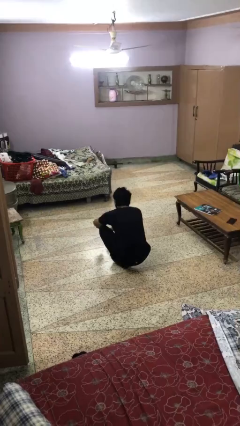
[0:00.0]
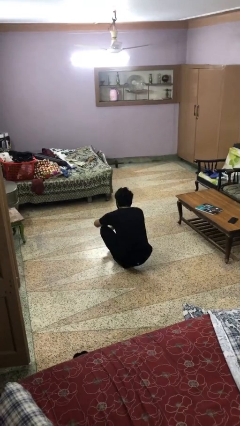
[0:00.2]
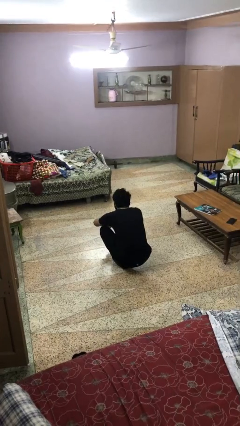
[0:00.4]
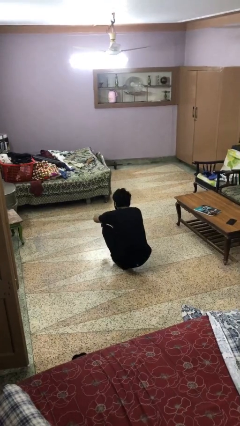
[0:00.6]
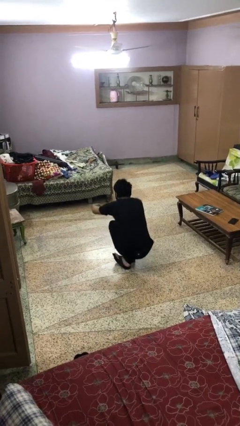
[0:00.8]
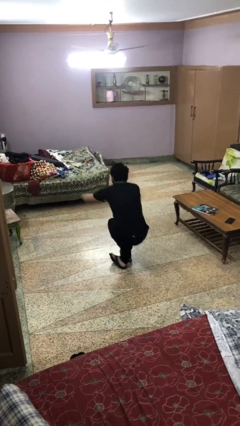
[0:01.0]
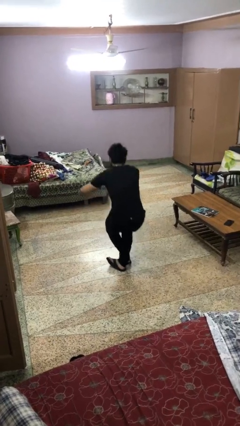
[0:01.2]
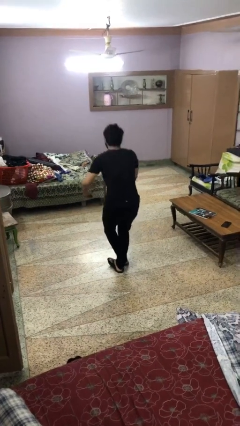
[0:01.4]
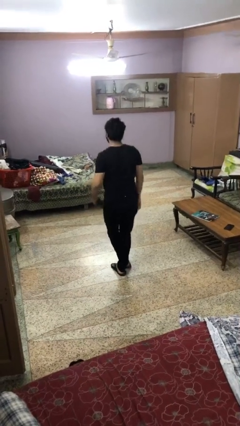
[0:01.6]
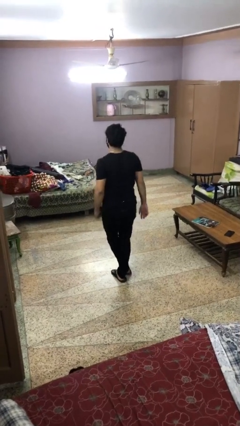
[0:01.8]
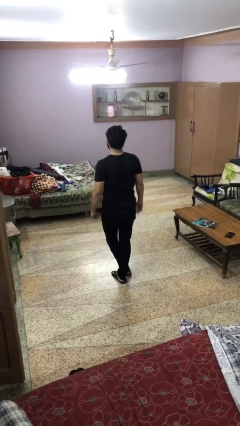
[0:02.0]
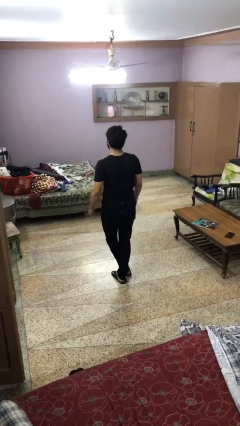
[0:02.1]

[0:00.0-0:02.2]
person stands up from floor

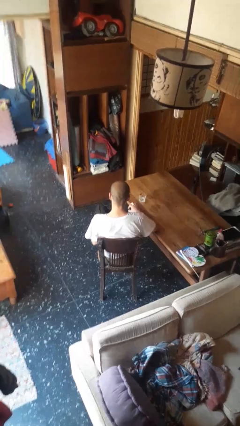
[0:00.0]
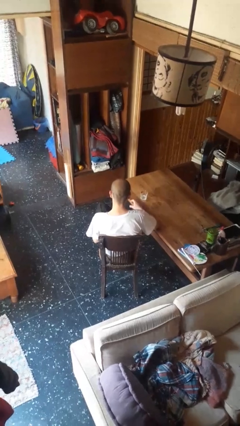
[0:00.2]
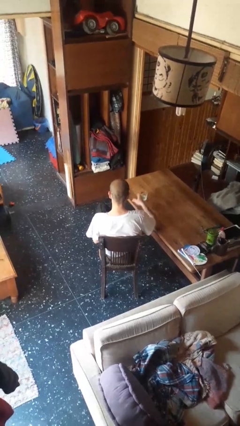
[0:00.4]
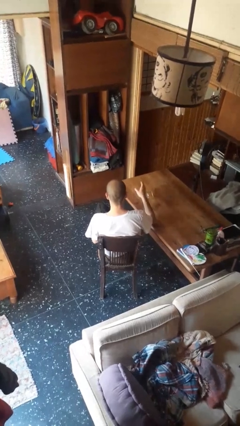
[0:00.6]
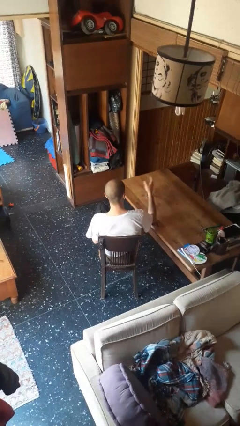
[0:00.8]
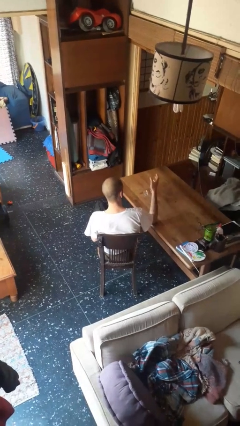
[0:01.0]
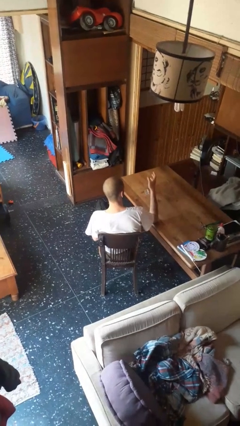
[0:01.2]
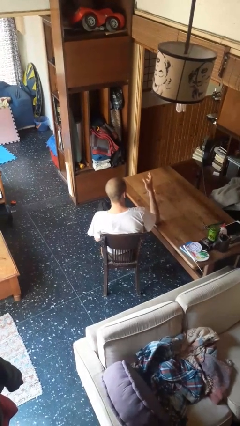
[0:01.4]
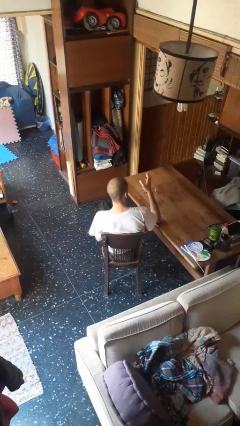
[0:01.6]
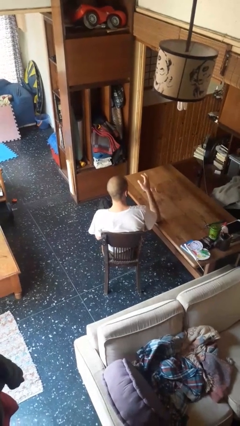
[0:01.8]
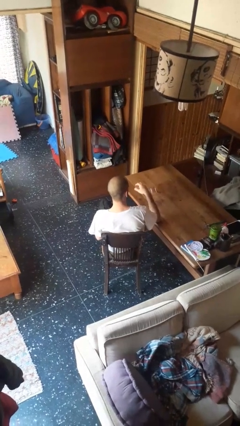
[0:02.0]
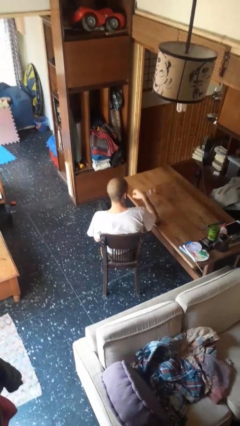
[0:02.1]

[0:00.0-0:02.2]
person knocks over glass

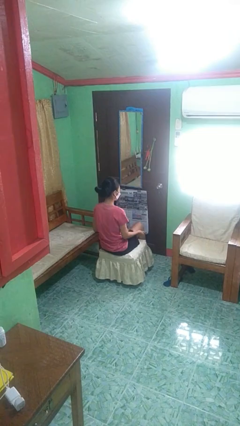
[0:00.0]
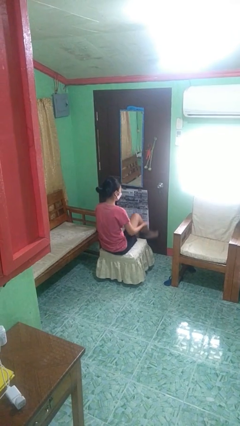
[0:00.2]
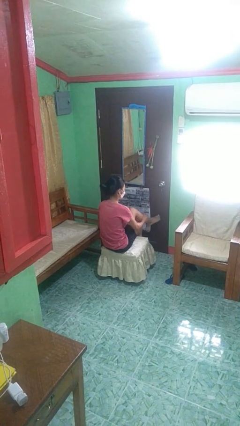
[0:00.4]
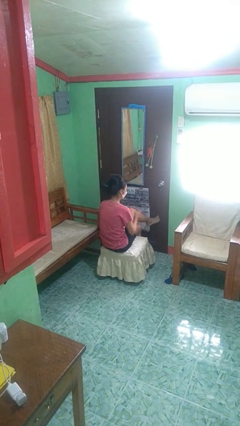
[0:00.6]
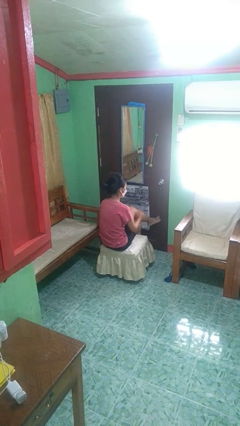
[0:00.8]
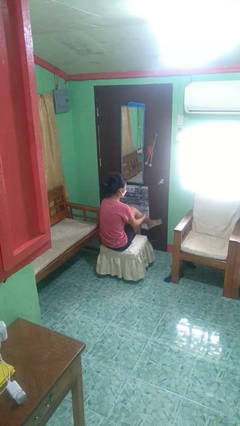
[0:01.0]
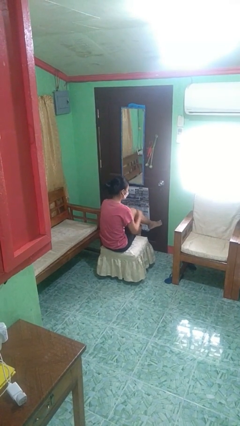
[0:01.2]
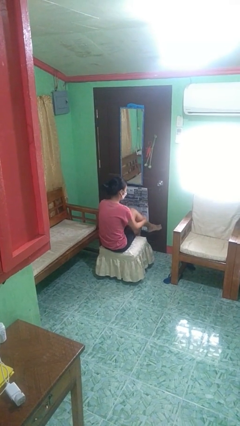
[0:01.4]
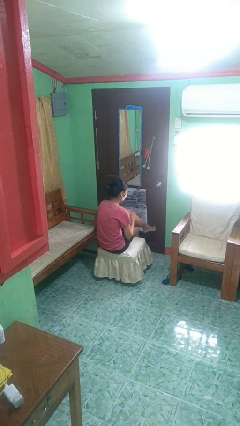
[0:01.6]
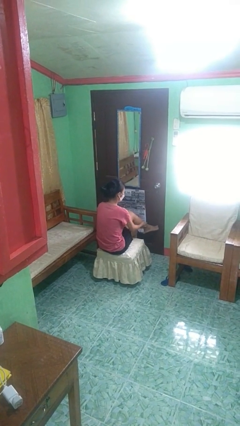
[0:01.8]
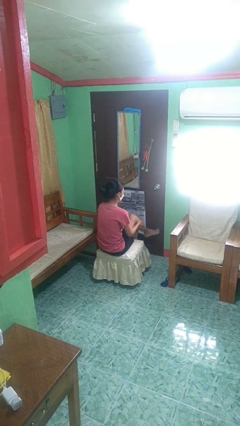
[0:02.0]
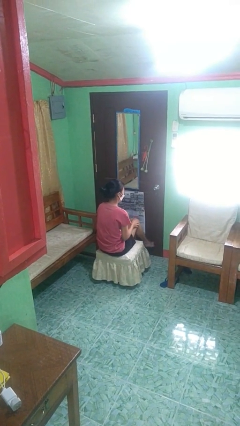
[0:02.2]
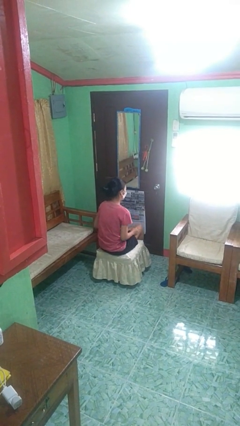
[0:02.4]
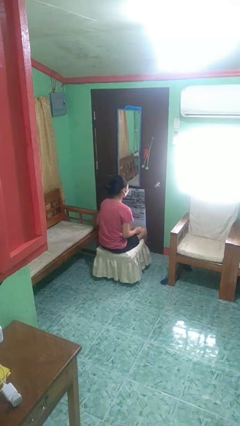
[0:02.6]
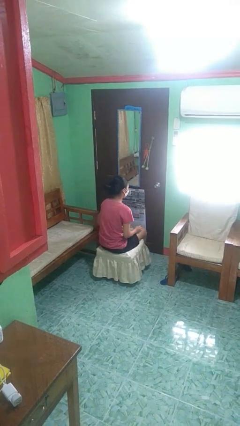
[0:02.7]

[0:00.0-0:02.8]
person applies sunscreen

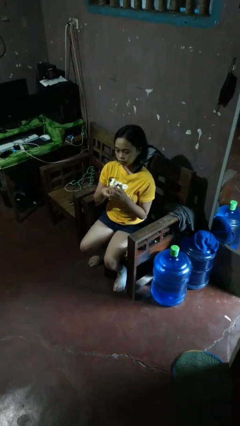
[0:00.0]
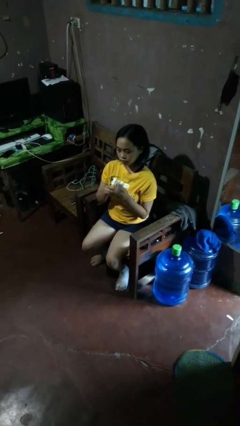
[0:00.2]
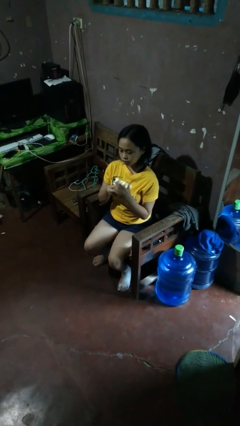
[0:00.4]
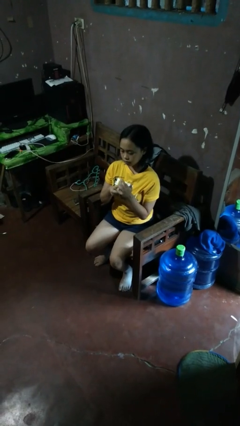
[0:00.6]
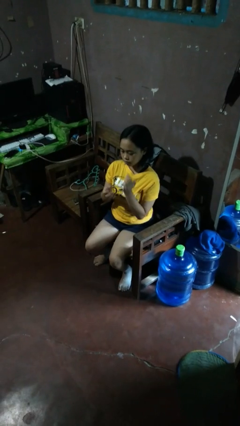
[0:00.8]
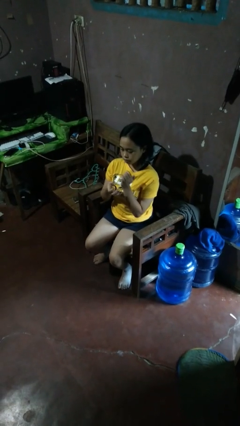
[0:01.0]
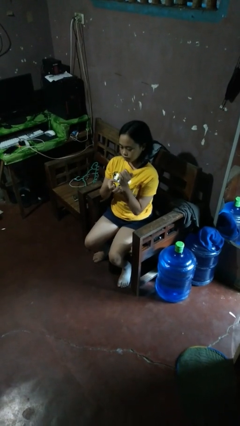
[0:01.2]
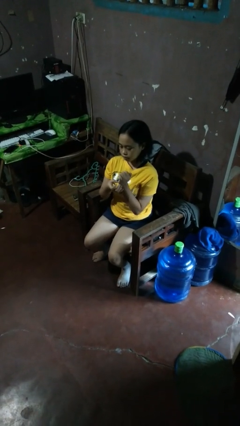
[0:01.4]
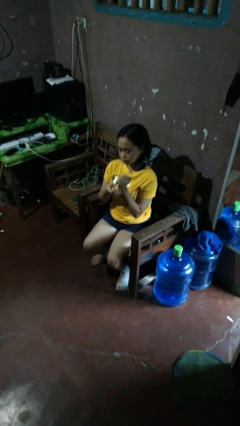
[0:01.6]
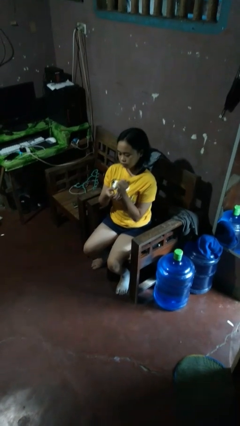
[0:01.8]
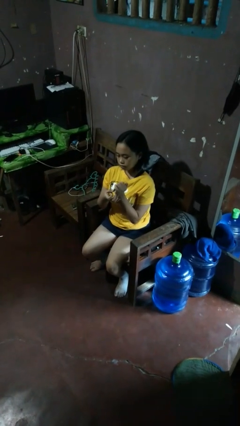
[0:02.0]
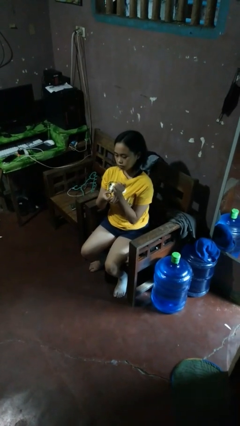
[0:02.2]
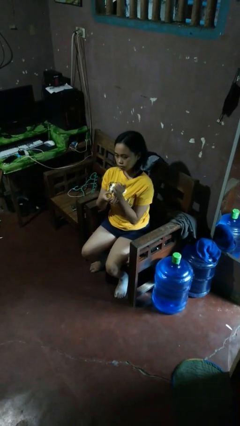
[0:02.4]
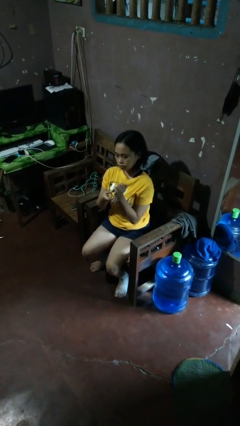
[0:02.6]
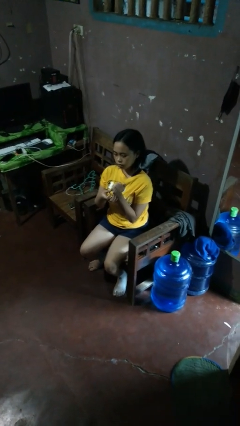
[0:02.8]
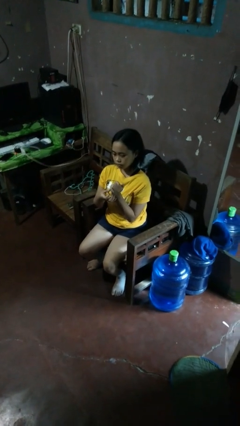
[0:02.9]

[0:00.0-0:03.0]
person clips fingernails

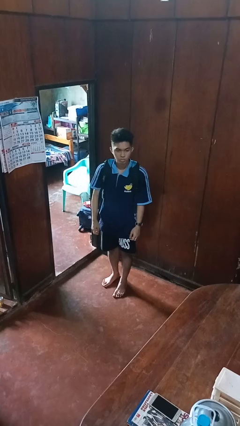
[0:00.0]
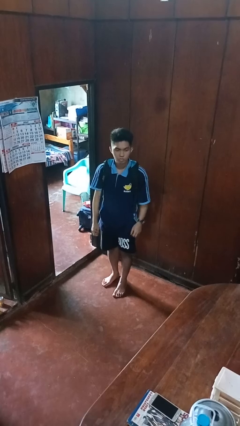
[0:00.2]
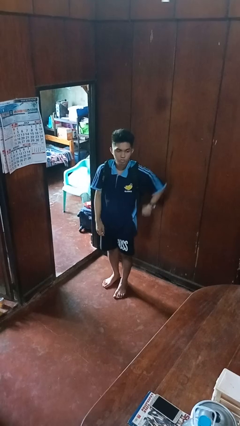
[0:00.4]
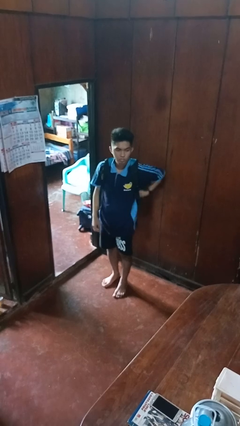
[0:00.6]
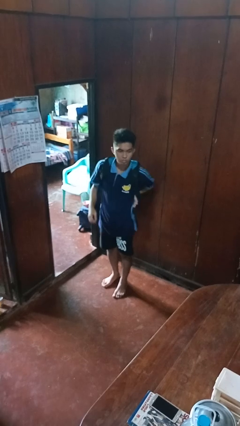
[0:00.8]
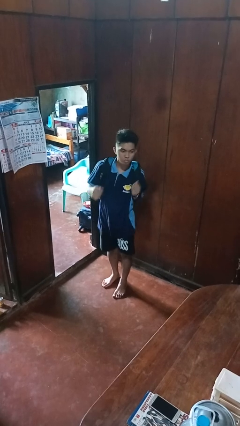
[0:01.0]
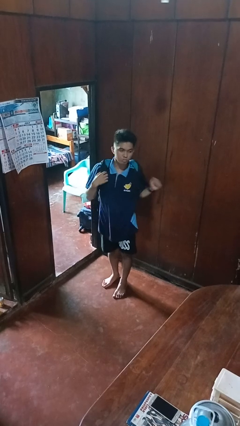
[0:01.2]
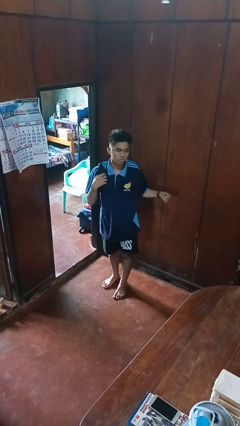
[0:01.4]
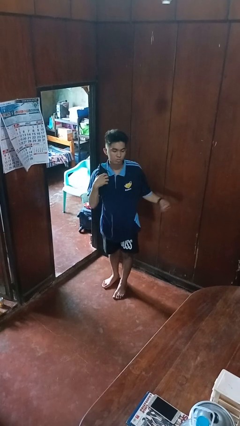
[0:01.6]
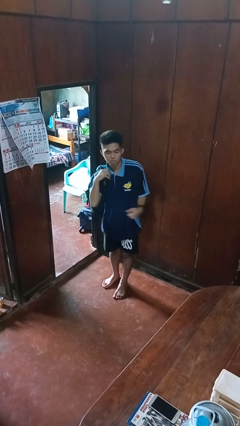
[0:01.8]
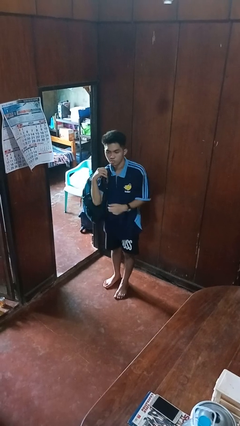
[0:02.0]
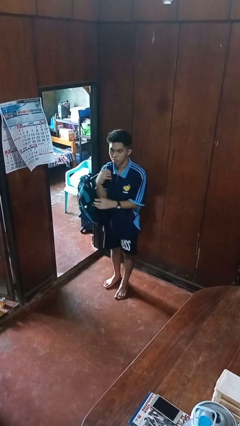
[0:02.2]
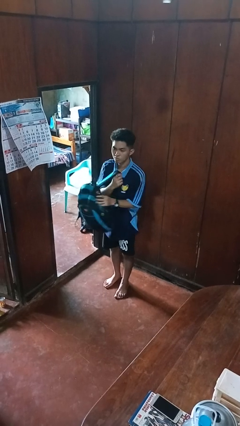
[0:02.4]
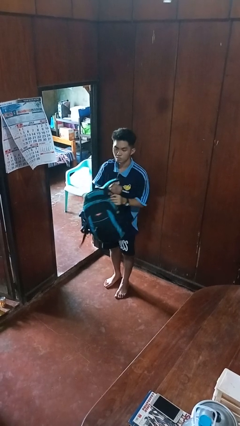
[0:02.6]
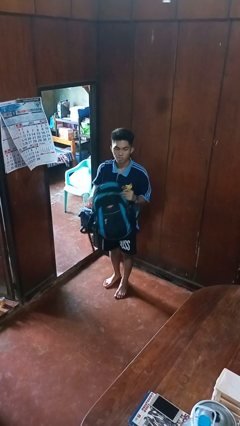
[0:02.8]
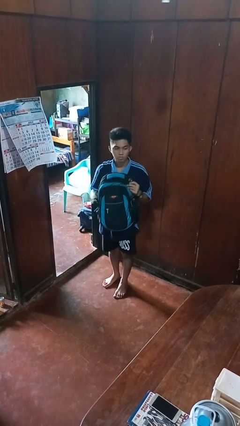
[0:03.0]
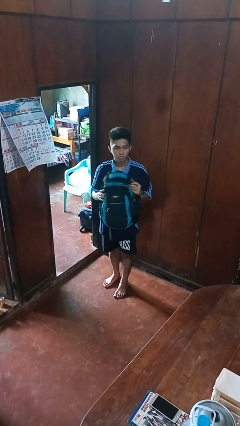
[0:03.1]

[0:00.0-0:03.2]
person takes off backpack

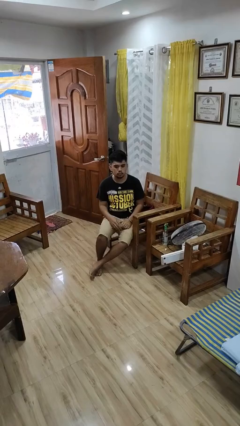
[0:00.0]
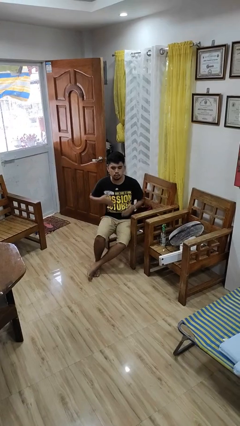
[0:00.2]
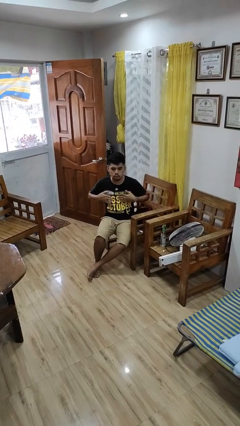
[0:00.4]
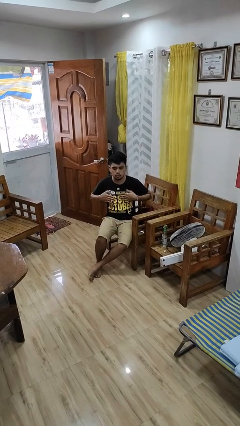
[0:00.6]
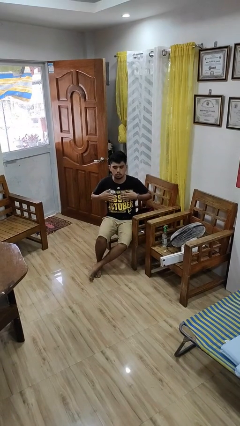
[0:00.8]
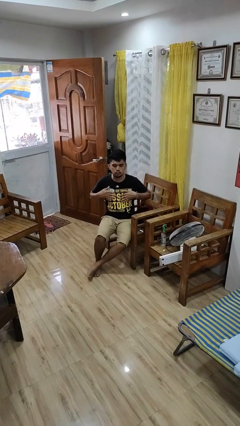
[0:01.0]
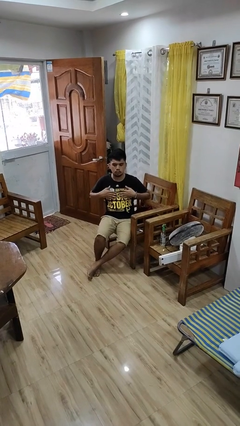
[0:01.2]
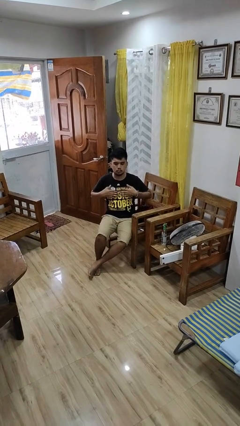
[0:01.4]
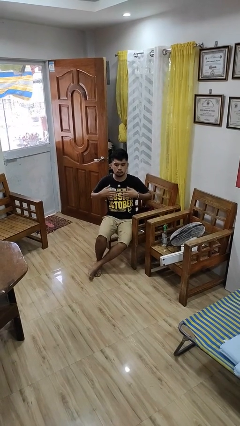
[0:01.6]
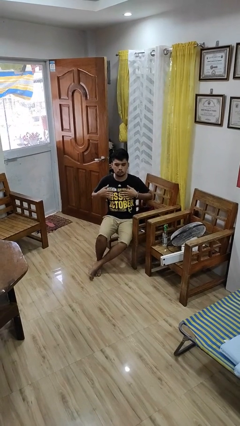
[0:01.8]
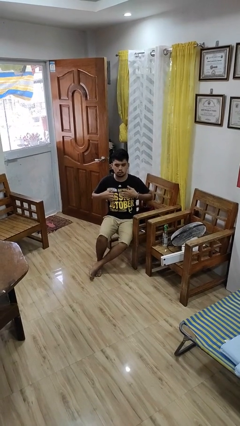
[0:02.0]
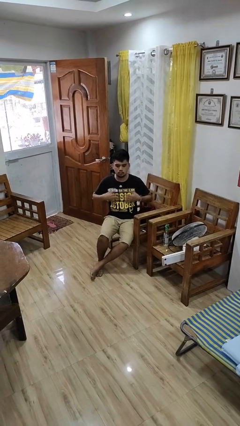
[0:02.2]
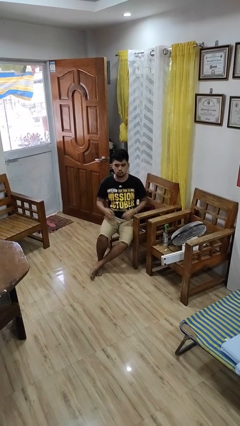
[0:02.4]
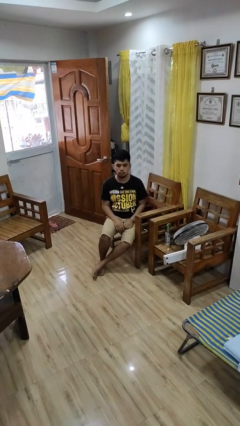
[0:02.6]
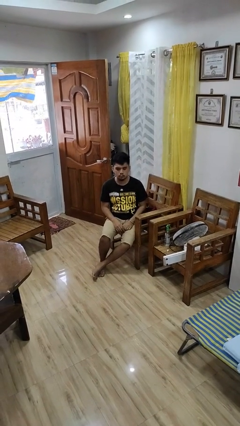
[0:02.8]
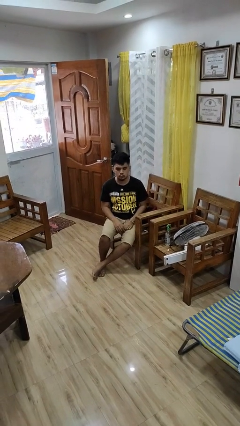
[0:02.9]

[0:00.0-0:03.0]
person drums on chest

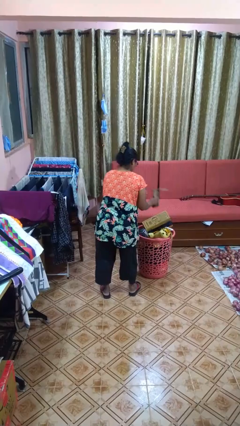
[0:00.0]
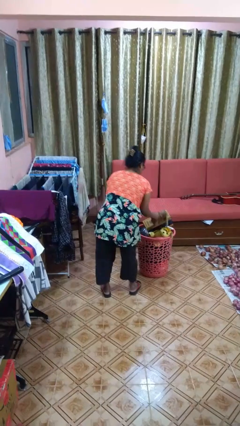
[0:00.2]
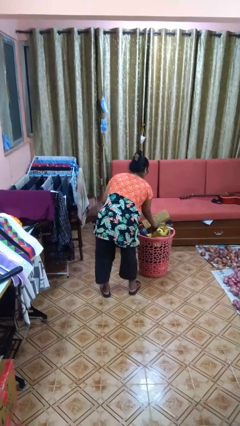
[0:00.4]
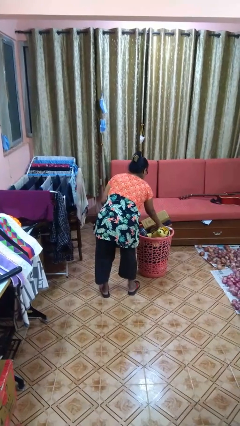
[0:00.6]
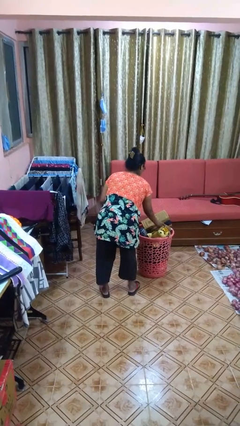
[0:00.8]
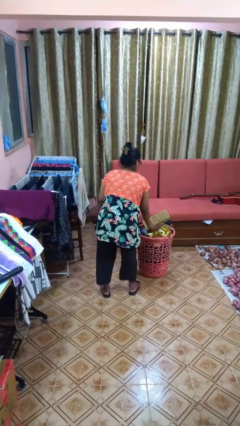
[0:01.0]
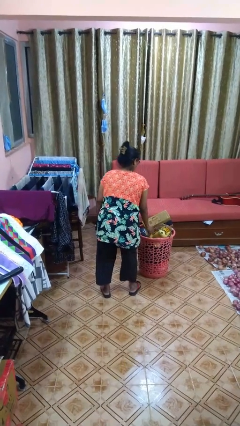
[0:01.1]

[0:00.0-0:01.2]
person puts object into basket
